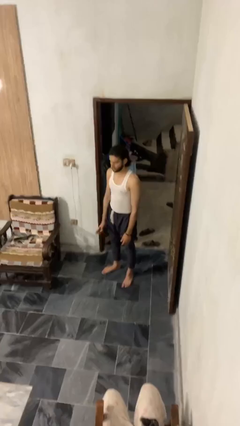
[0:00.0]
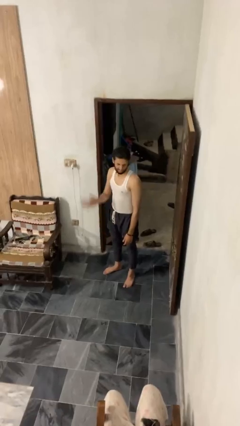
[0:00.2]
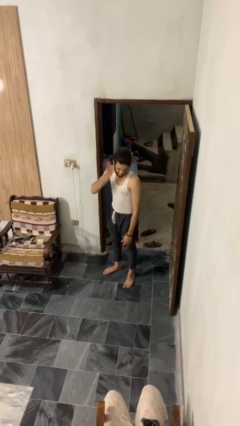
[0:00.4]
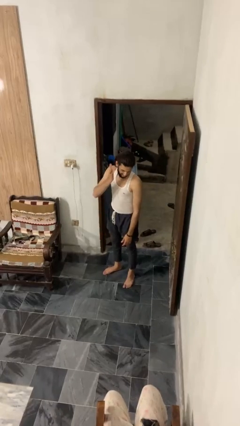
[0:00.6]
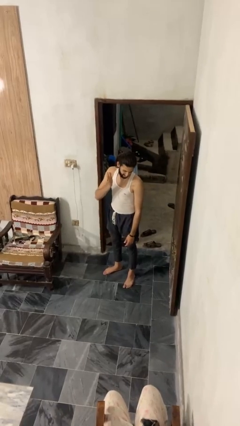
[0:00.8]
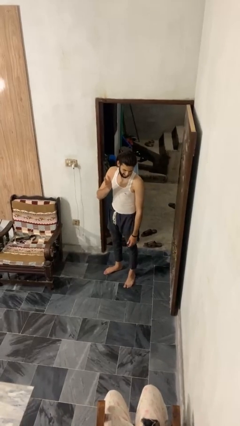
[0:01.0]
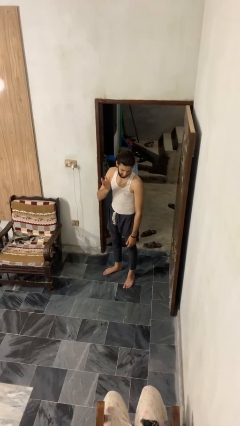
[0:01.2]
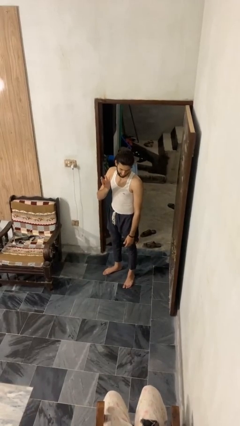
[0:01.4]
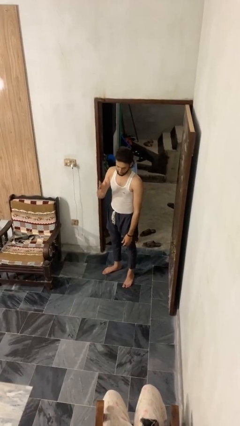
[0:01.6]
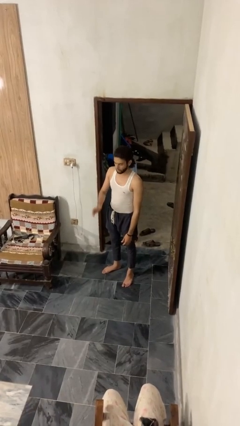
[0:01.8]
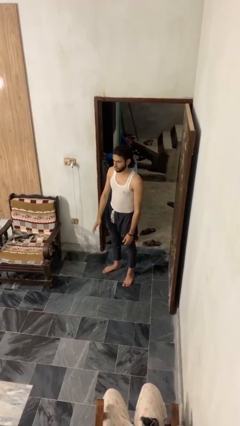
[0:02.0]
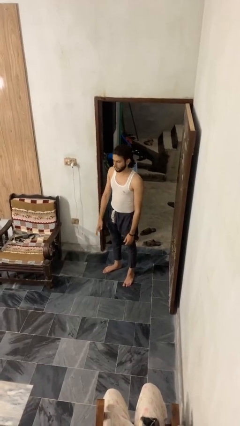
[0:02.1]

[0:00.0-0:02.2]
person swats bug

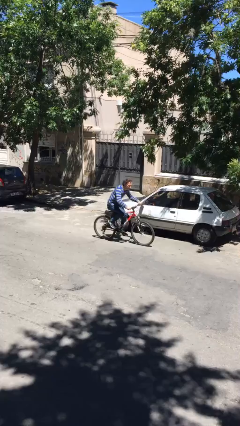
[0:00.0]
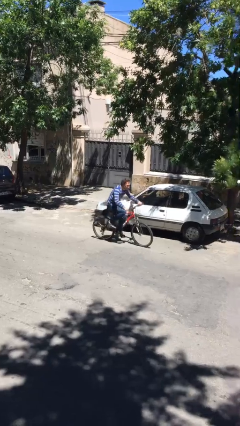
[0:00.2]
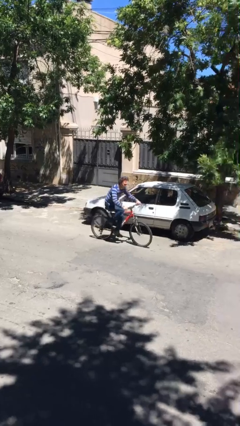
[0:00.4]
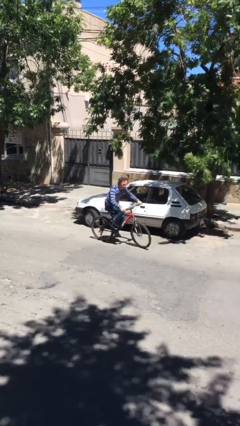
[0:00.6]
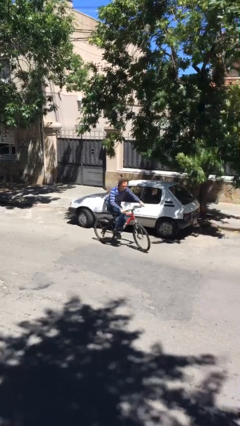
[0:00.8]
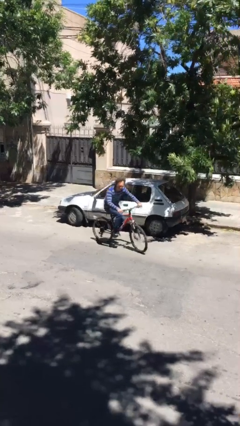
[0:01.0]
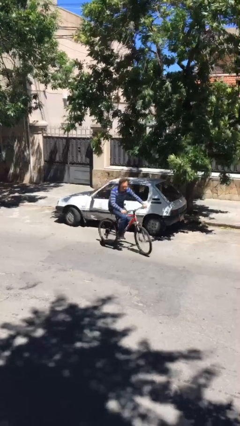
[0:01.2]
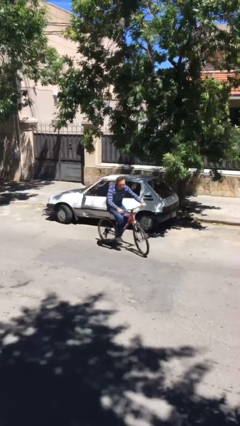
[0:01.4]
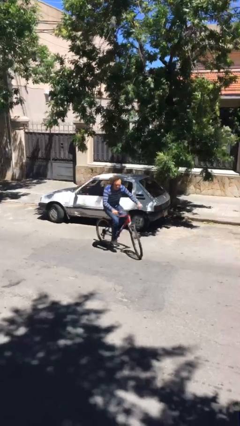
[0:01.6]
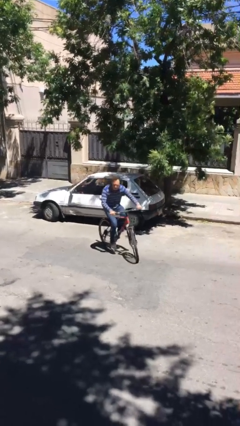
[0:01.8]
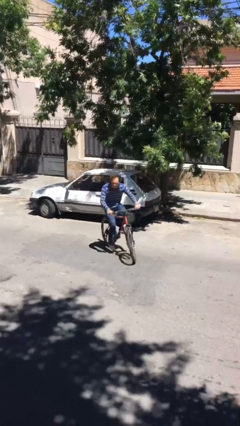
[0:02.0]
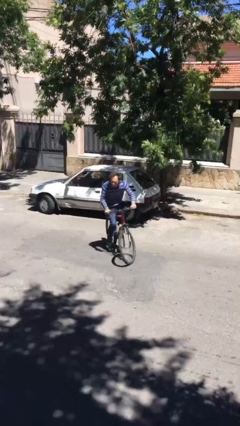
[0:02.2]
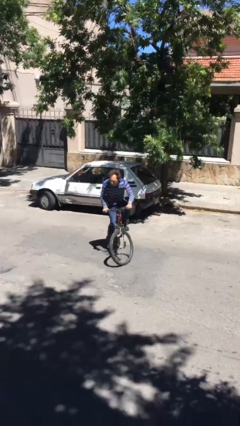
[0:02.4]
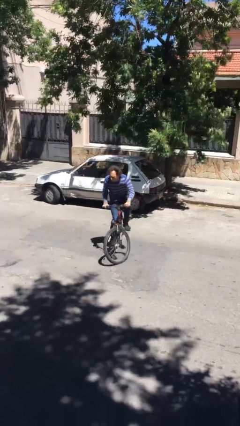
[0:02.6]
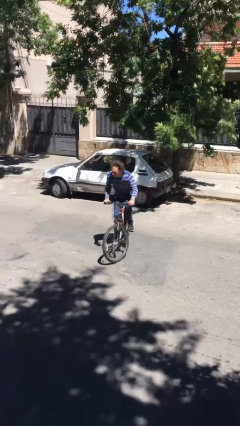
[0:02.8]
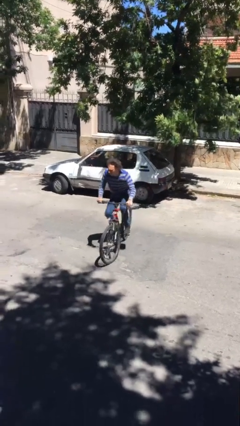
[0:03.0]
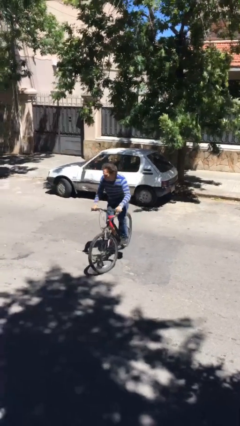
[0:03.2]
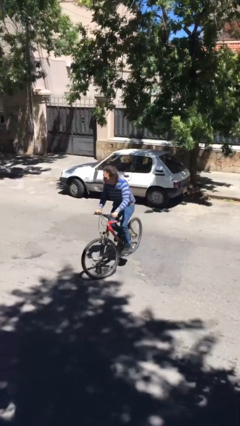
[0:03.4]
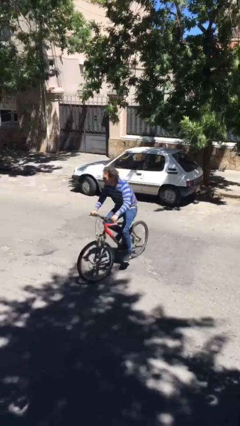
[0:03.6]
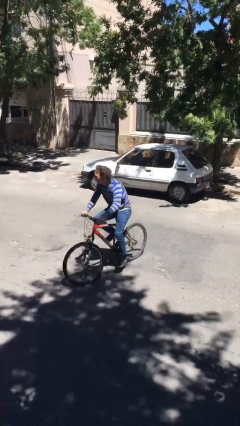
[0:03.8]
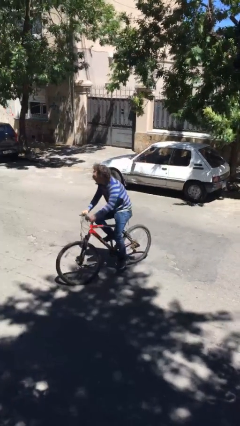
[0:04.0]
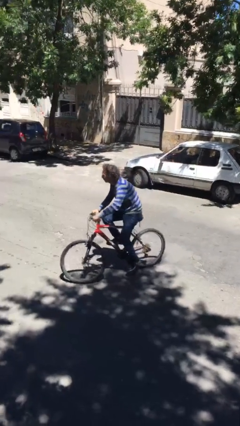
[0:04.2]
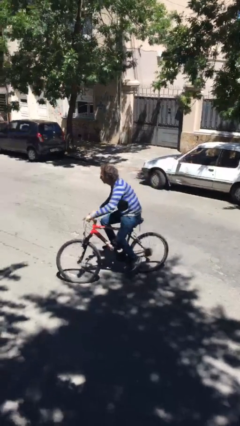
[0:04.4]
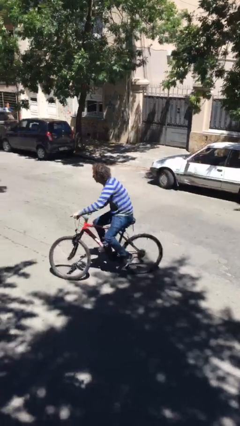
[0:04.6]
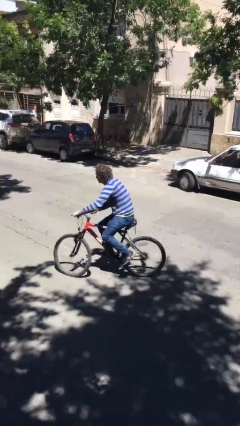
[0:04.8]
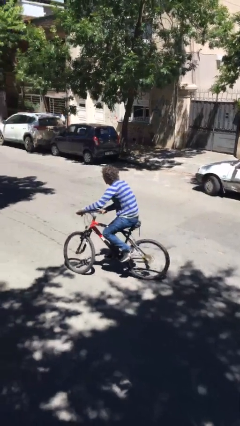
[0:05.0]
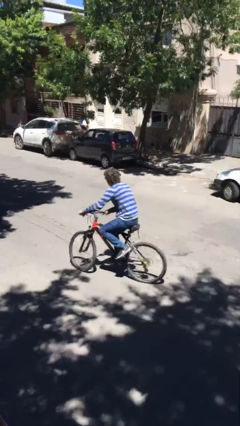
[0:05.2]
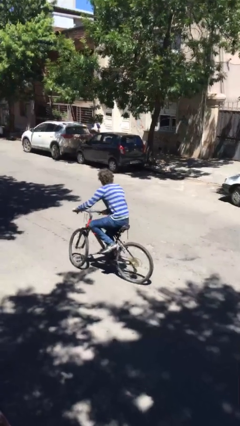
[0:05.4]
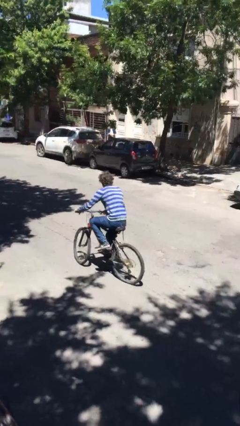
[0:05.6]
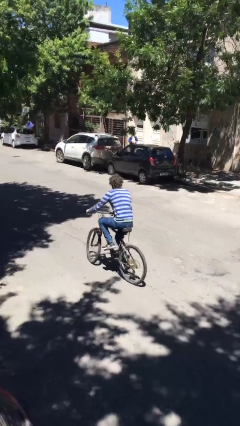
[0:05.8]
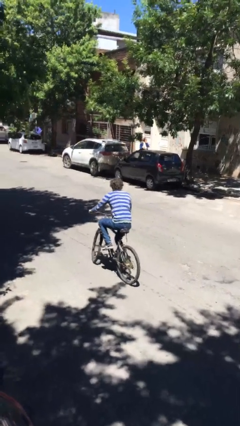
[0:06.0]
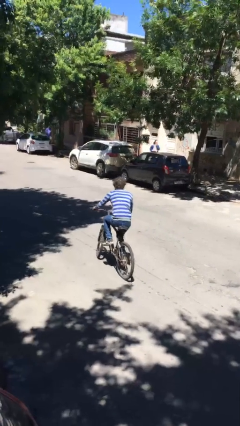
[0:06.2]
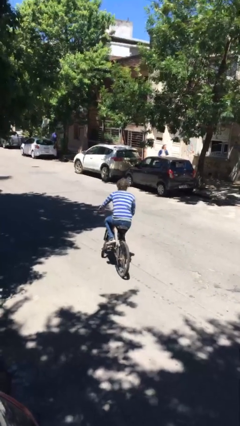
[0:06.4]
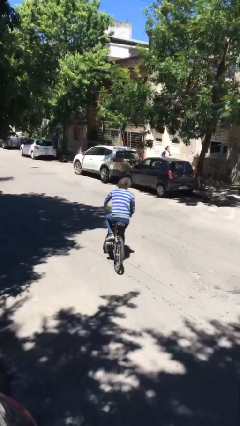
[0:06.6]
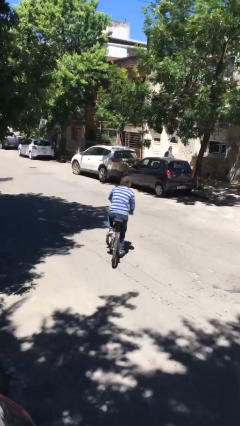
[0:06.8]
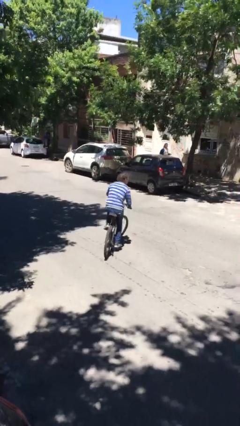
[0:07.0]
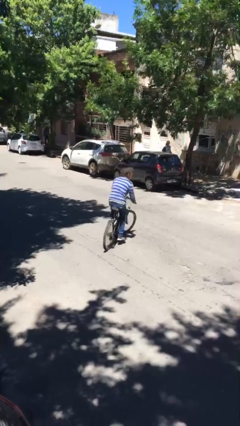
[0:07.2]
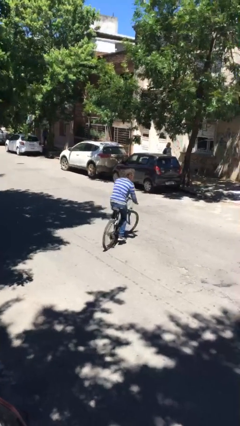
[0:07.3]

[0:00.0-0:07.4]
person rides bicycle

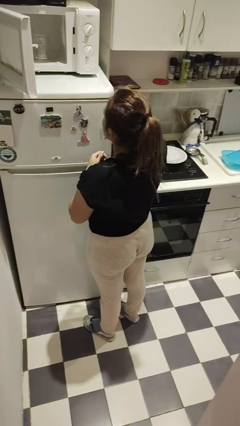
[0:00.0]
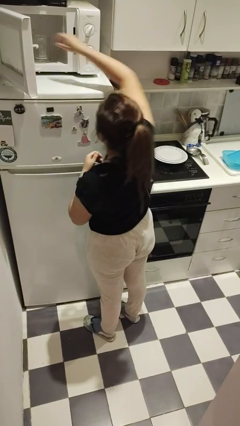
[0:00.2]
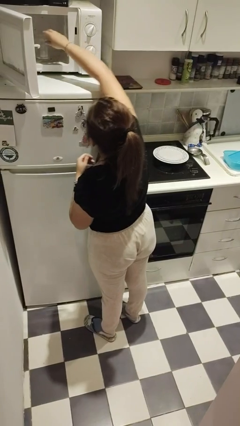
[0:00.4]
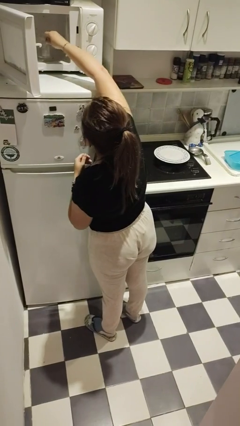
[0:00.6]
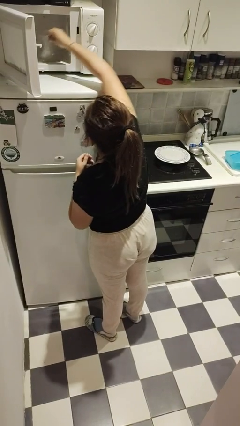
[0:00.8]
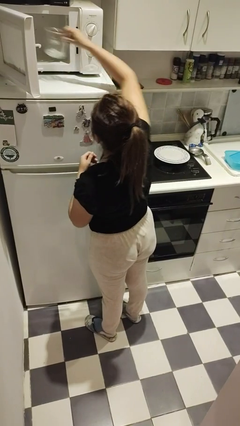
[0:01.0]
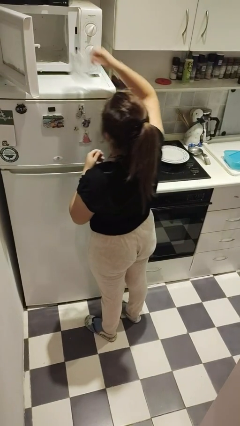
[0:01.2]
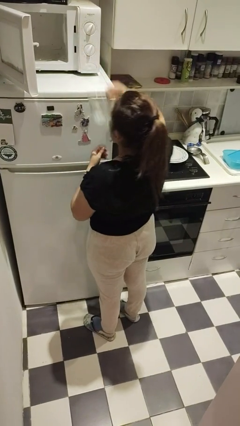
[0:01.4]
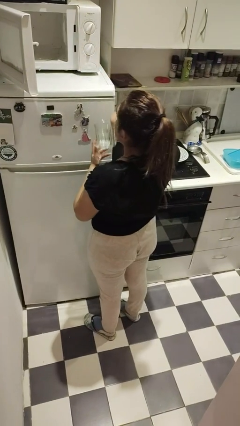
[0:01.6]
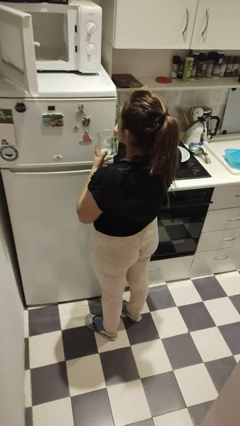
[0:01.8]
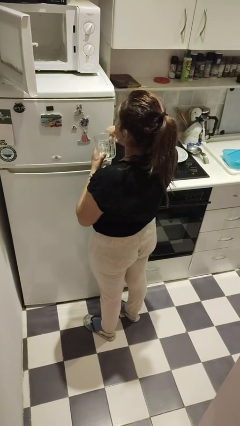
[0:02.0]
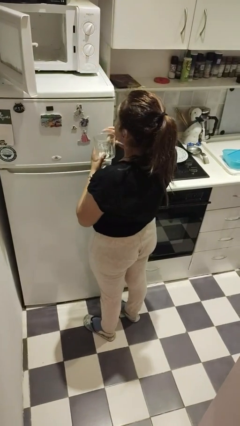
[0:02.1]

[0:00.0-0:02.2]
person takes object from microwave

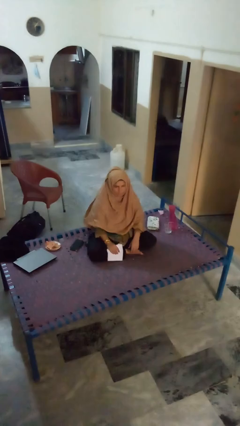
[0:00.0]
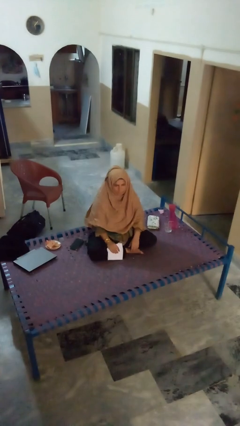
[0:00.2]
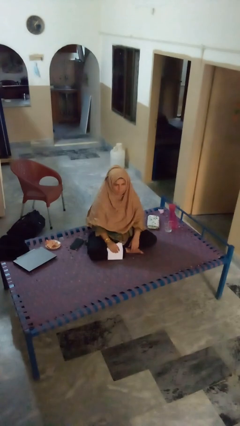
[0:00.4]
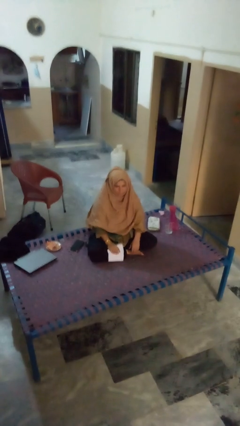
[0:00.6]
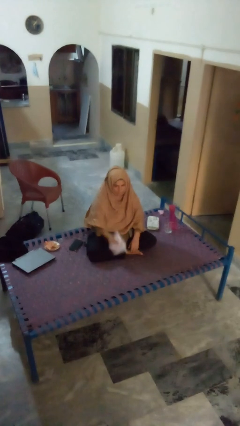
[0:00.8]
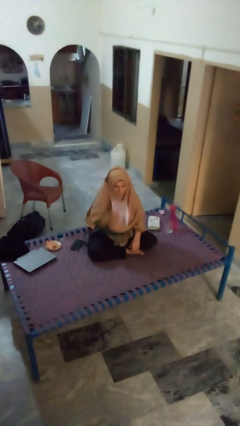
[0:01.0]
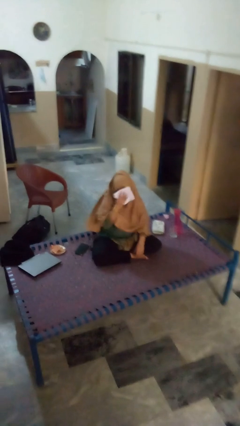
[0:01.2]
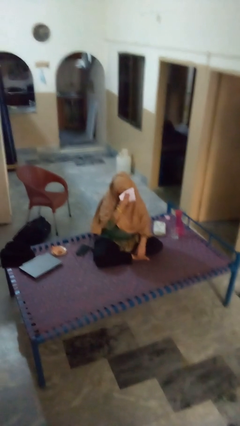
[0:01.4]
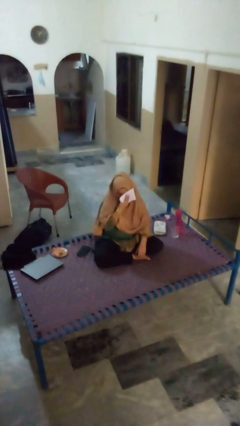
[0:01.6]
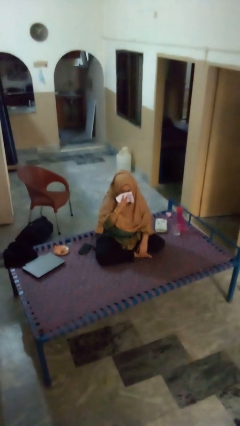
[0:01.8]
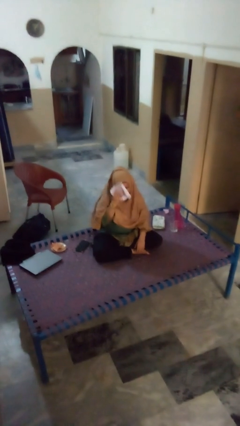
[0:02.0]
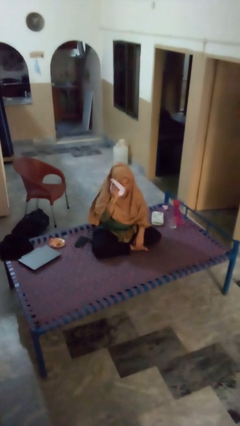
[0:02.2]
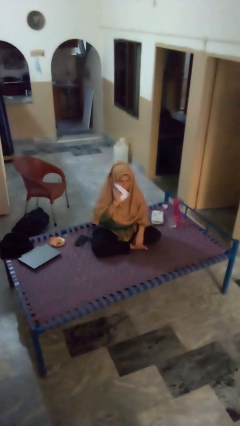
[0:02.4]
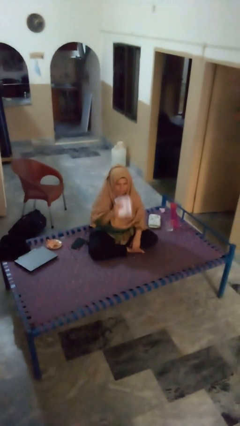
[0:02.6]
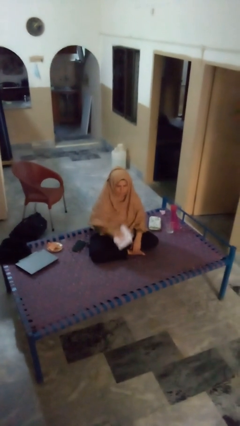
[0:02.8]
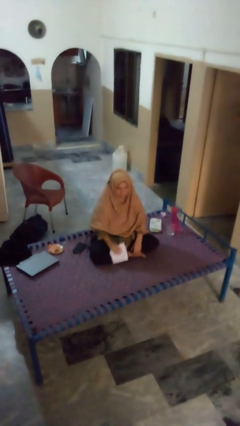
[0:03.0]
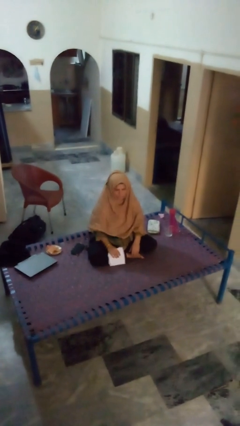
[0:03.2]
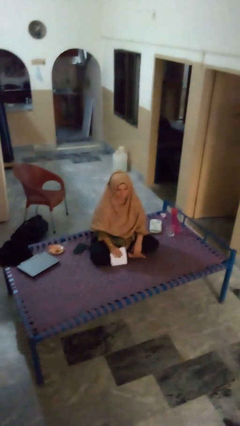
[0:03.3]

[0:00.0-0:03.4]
person wipes mouth with napkin

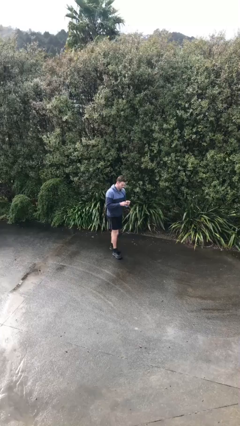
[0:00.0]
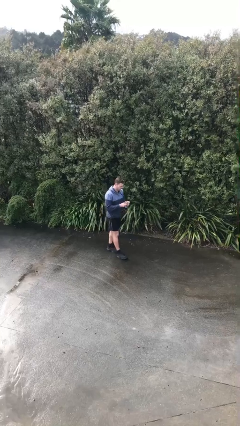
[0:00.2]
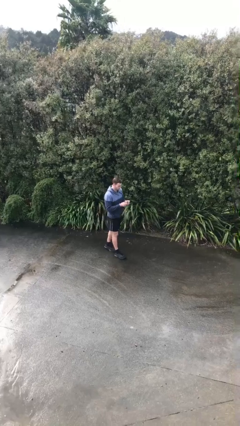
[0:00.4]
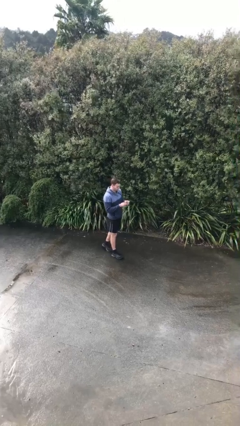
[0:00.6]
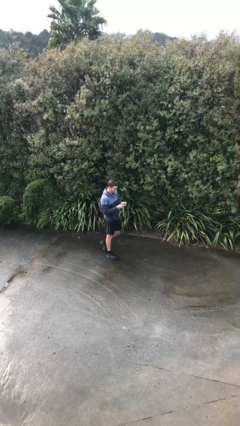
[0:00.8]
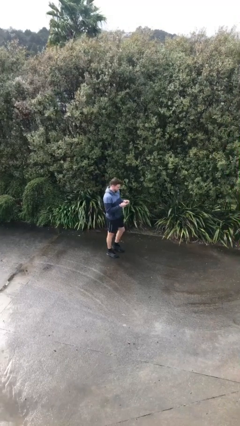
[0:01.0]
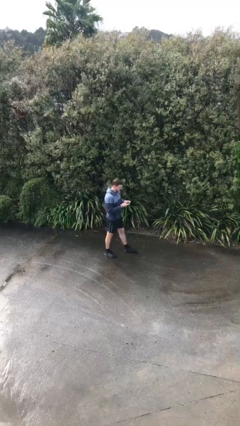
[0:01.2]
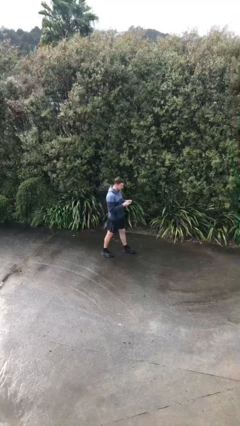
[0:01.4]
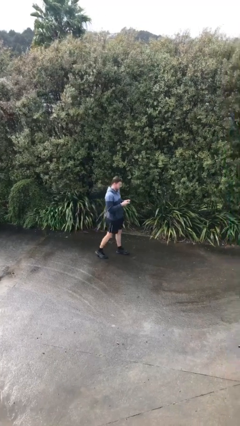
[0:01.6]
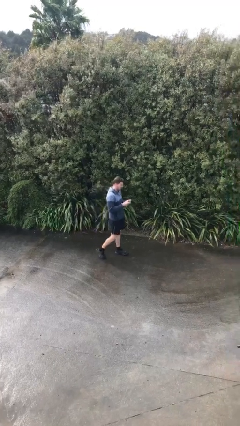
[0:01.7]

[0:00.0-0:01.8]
person texts on phone

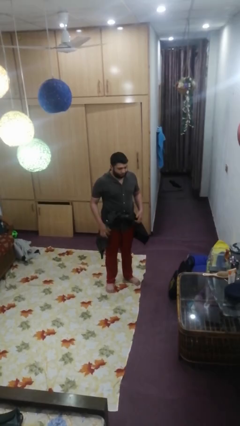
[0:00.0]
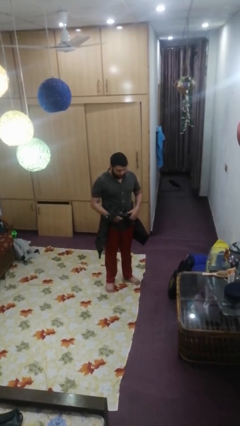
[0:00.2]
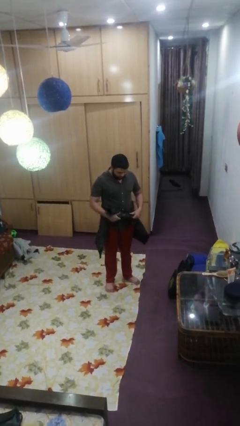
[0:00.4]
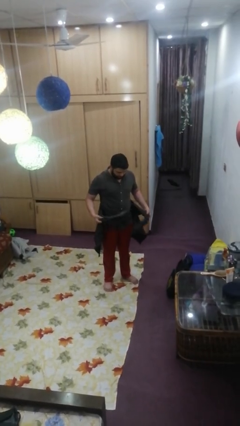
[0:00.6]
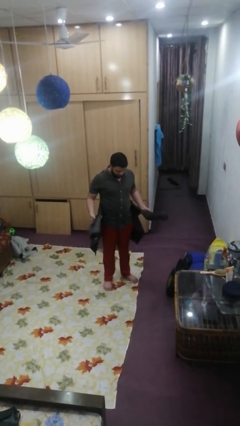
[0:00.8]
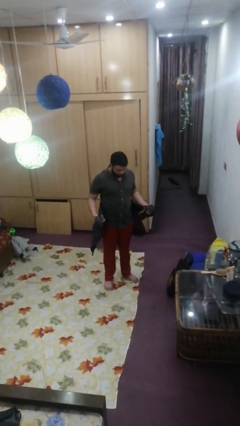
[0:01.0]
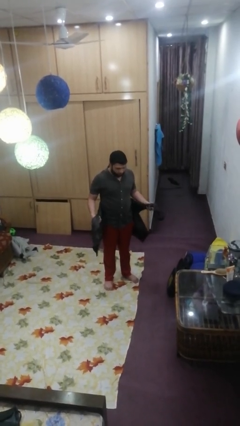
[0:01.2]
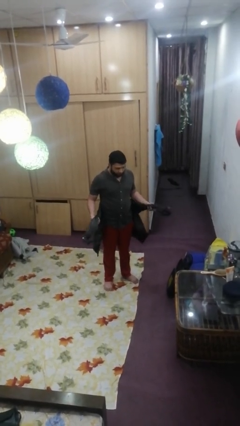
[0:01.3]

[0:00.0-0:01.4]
person unties jacket around waist
